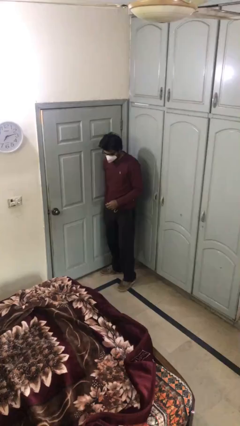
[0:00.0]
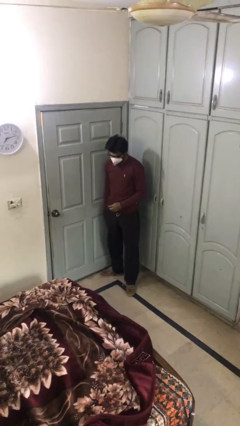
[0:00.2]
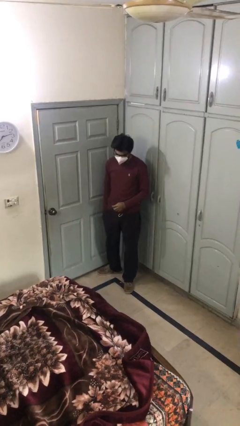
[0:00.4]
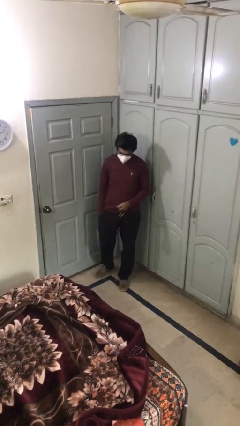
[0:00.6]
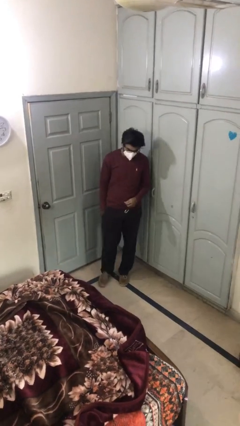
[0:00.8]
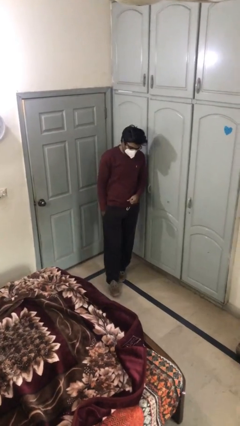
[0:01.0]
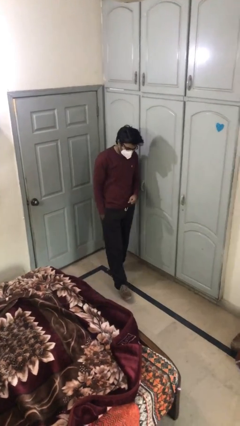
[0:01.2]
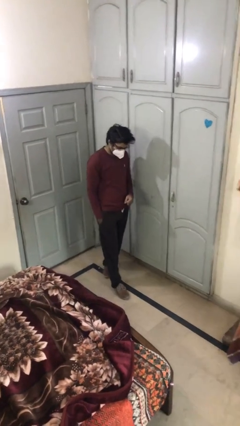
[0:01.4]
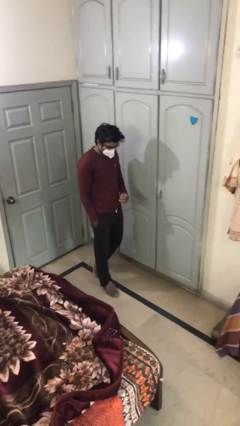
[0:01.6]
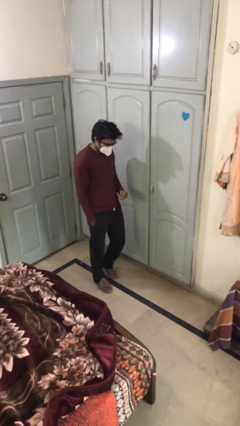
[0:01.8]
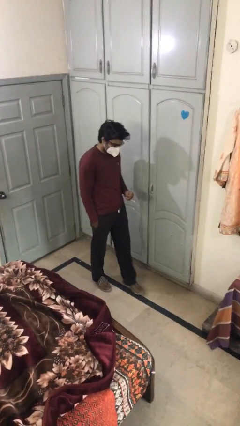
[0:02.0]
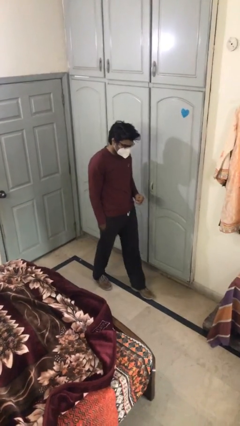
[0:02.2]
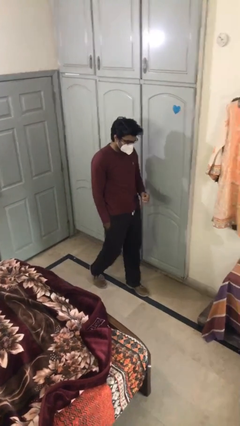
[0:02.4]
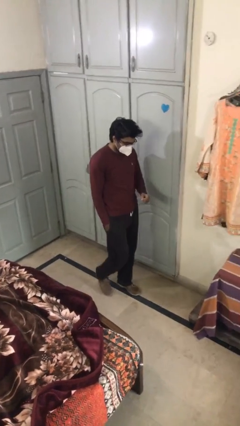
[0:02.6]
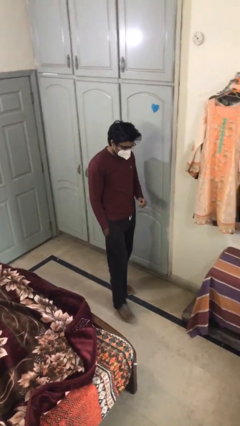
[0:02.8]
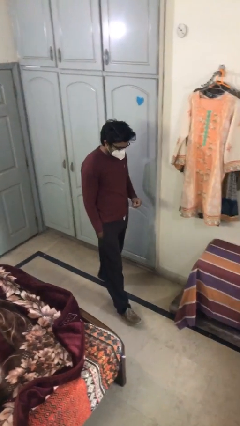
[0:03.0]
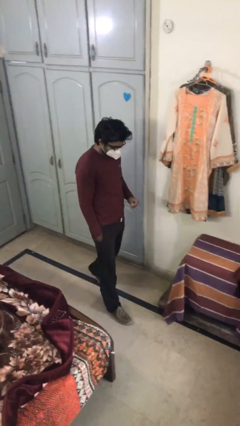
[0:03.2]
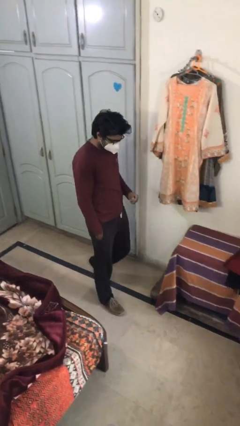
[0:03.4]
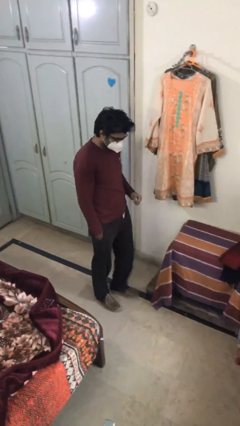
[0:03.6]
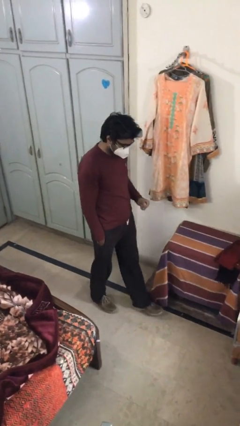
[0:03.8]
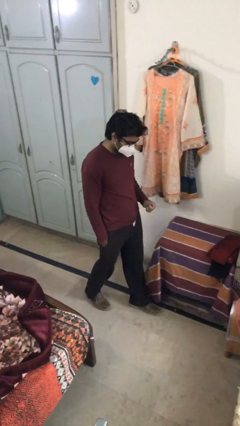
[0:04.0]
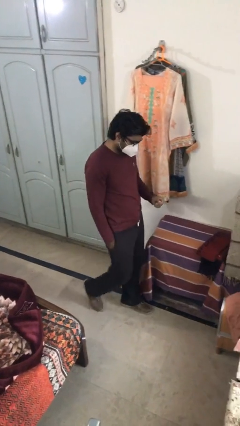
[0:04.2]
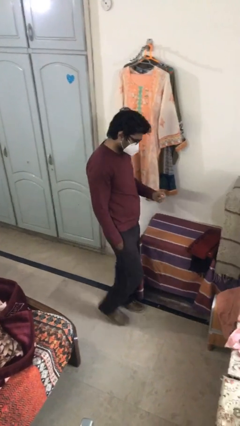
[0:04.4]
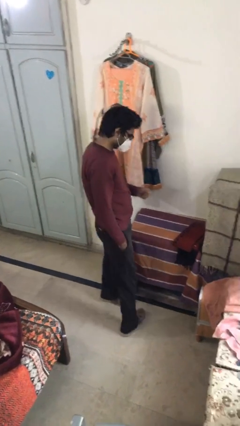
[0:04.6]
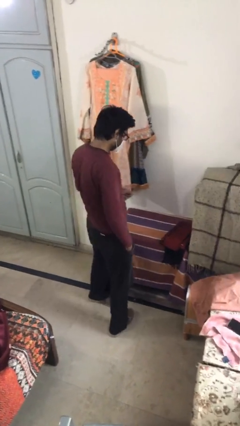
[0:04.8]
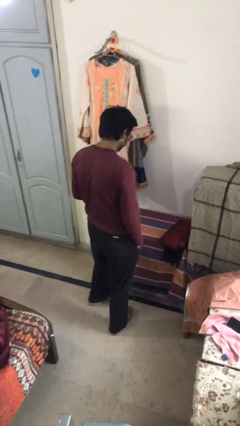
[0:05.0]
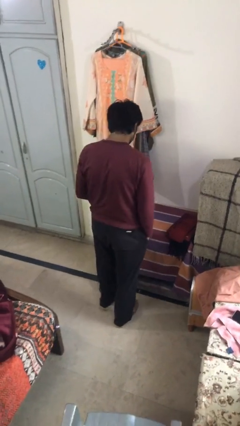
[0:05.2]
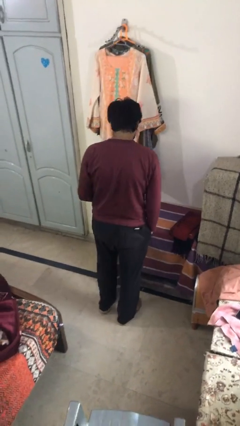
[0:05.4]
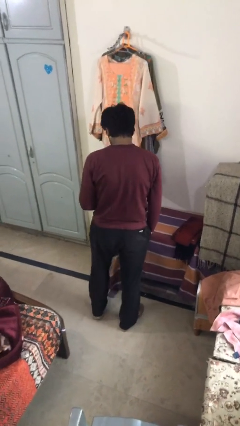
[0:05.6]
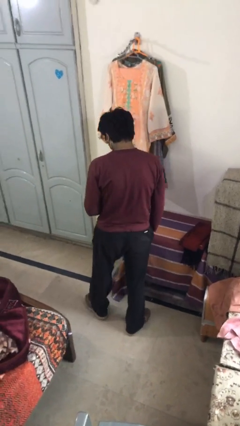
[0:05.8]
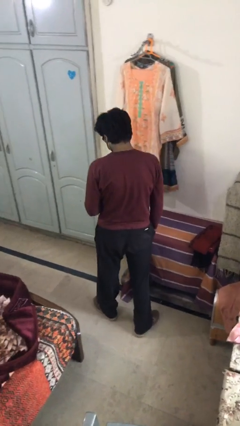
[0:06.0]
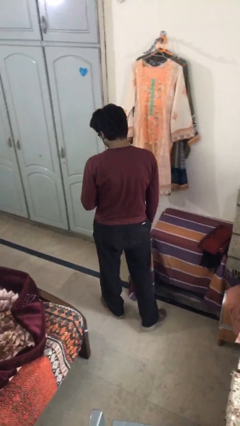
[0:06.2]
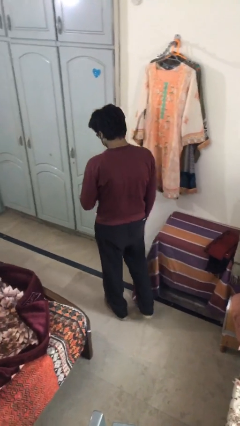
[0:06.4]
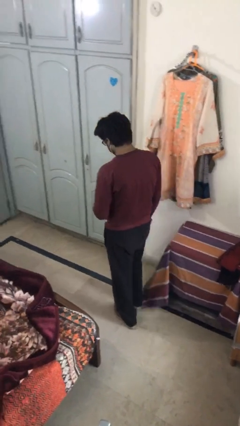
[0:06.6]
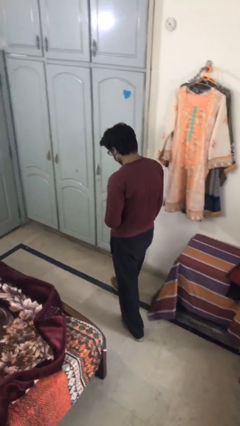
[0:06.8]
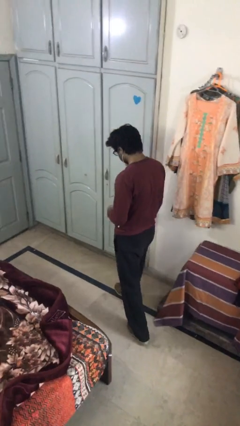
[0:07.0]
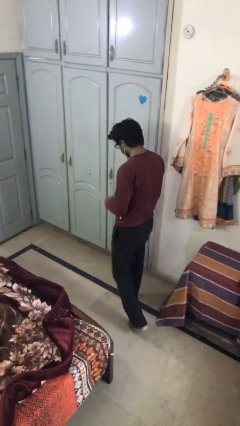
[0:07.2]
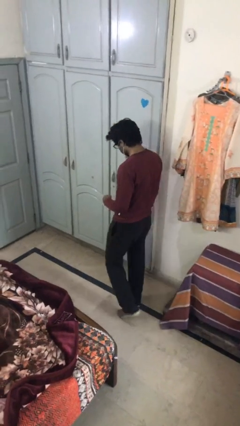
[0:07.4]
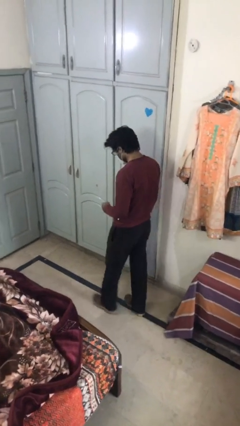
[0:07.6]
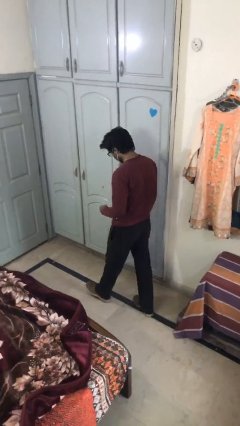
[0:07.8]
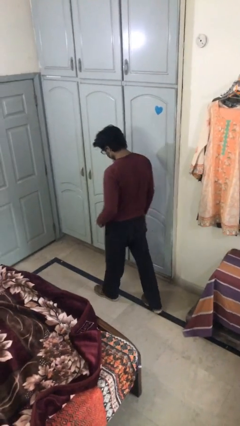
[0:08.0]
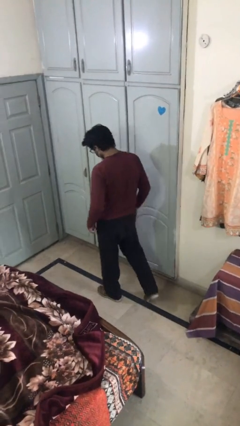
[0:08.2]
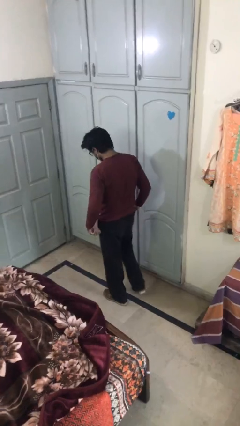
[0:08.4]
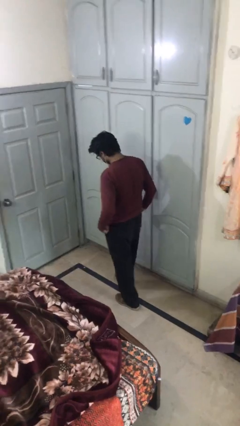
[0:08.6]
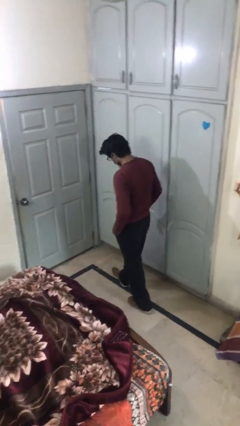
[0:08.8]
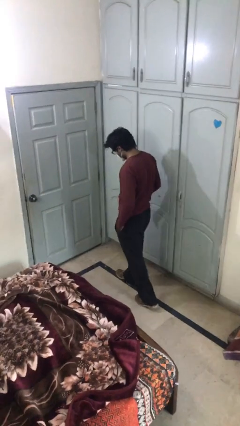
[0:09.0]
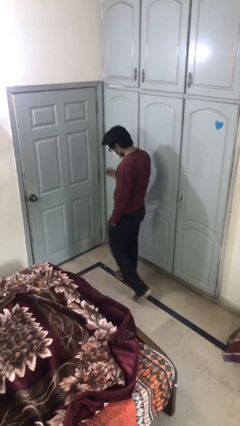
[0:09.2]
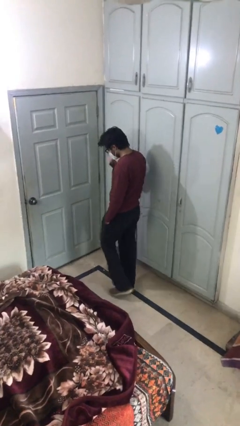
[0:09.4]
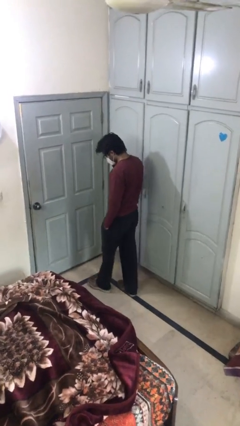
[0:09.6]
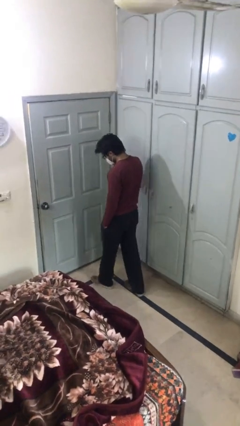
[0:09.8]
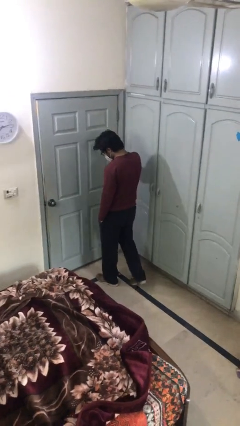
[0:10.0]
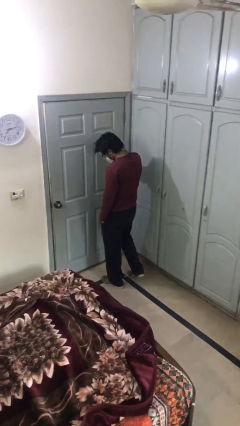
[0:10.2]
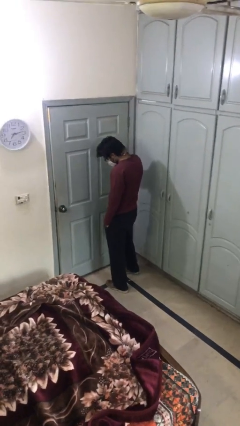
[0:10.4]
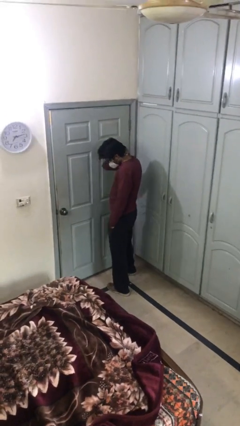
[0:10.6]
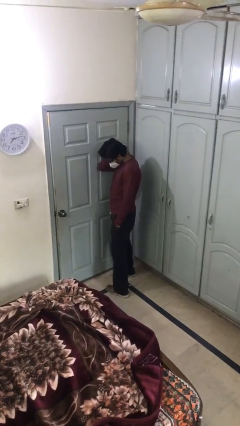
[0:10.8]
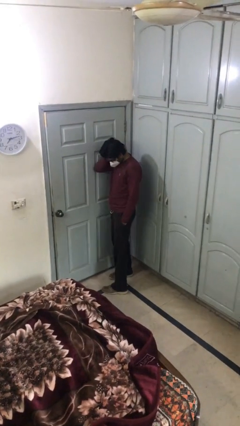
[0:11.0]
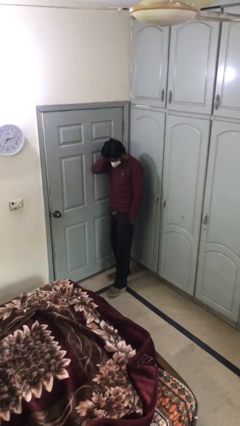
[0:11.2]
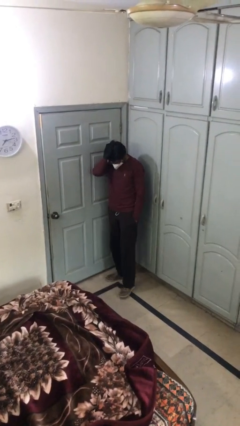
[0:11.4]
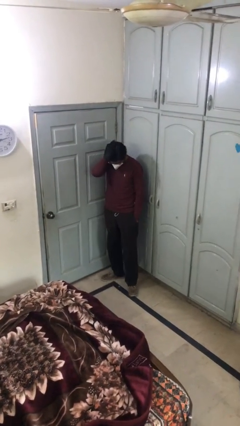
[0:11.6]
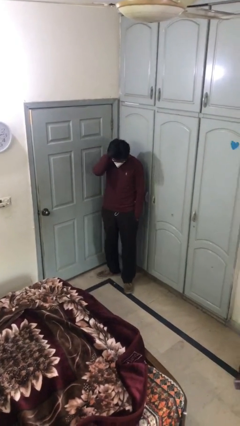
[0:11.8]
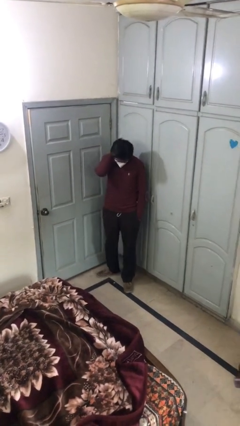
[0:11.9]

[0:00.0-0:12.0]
person walks

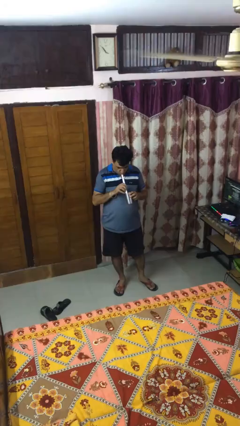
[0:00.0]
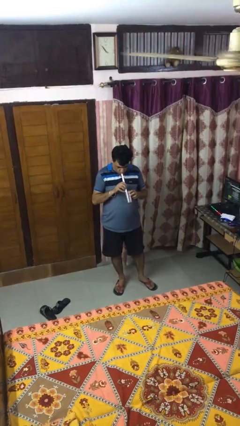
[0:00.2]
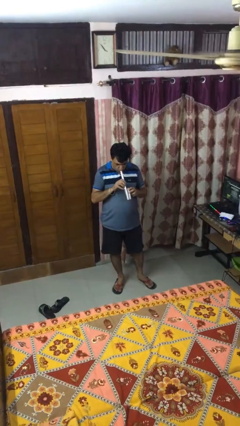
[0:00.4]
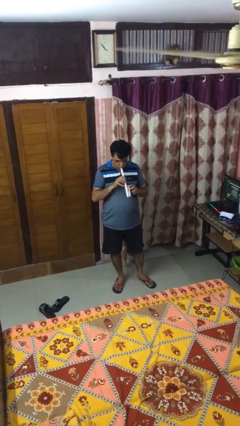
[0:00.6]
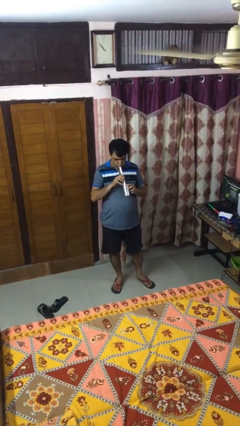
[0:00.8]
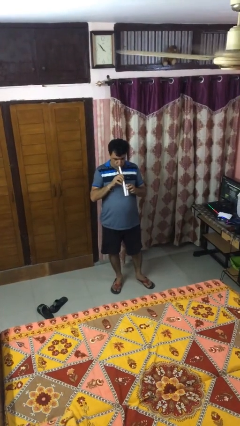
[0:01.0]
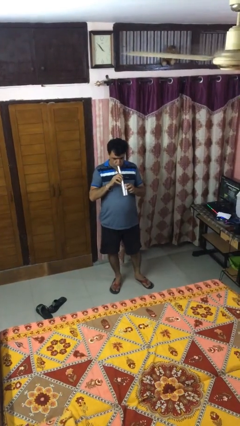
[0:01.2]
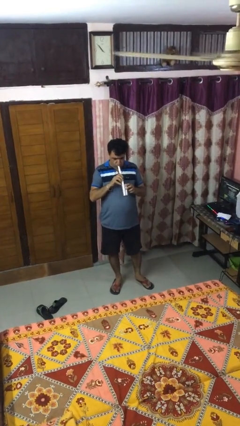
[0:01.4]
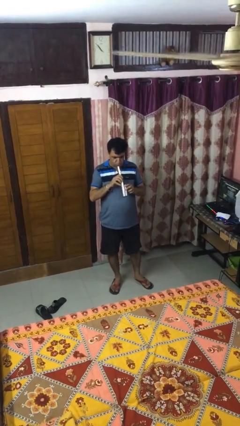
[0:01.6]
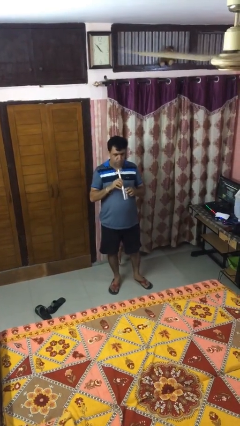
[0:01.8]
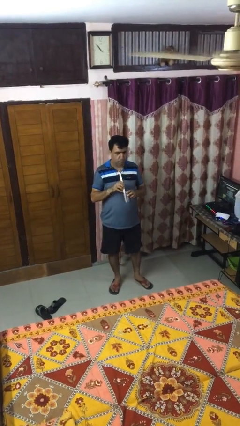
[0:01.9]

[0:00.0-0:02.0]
person drinks from straw

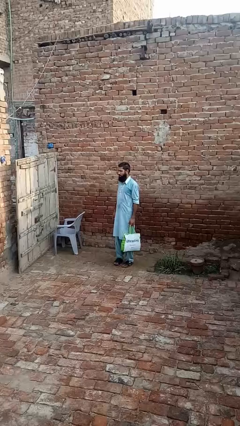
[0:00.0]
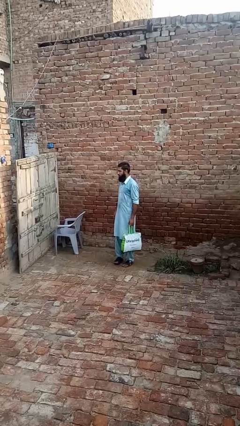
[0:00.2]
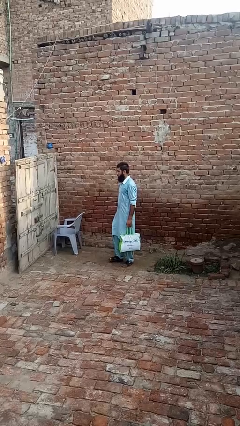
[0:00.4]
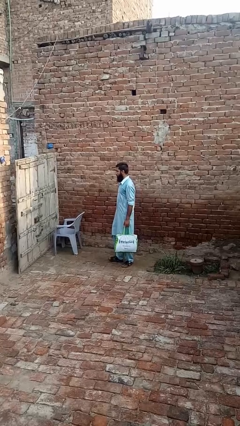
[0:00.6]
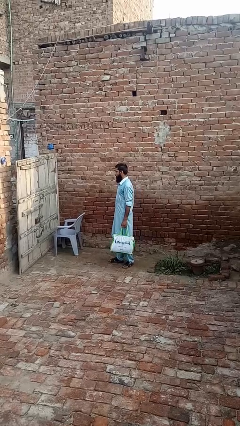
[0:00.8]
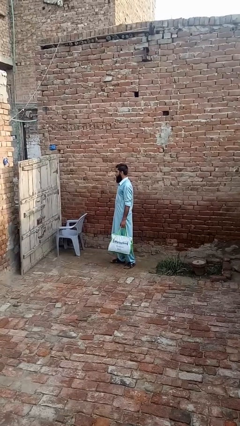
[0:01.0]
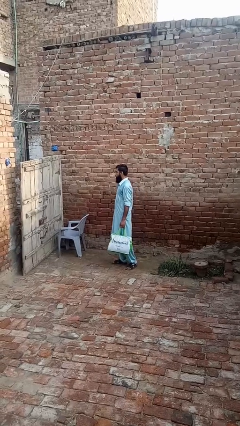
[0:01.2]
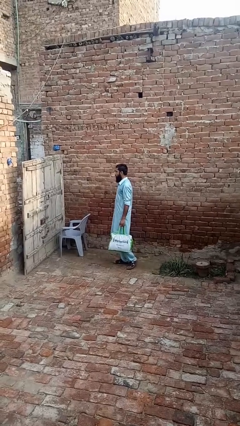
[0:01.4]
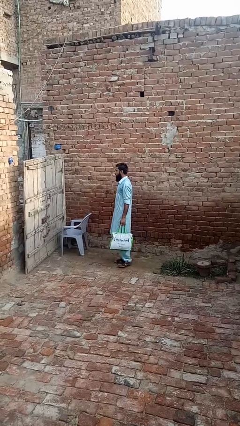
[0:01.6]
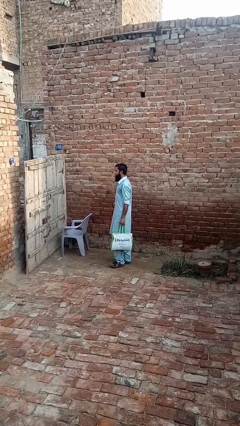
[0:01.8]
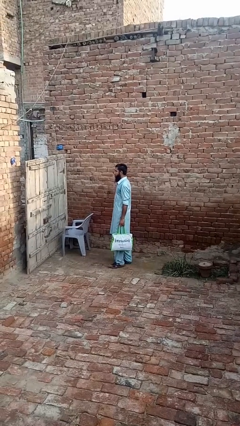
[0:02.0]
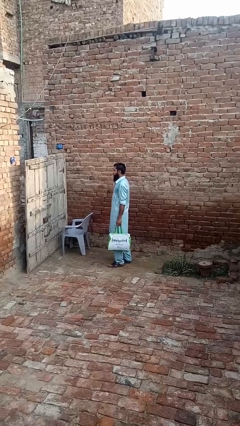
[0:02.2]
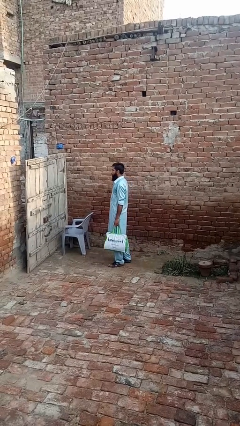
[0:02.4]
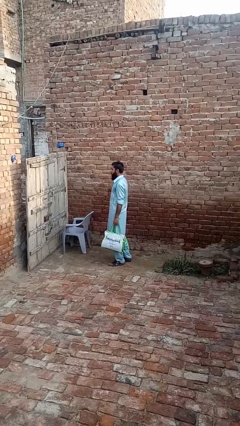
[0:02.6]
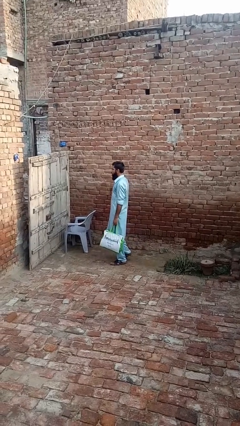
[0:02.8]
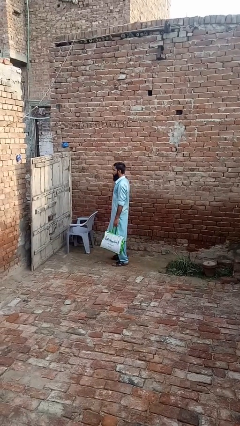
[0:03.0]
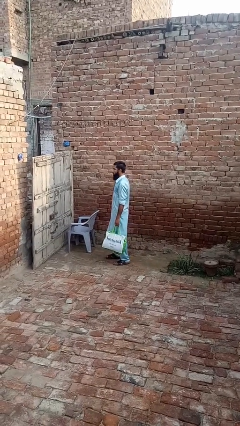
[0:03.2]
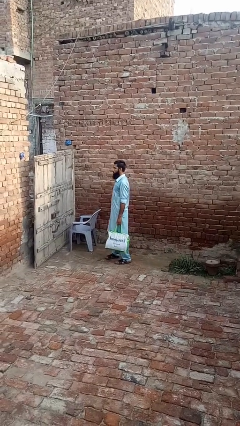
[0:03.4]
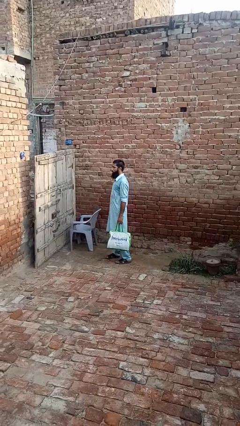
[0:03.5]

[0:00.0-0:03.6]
person carries groceries

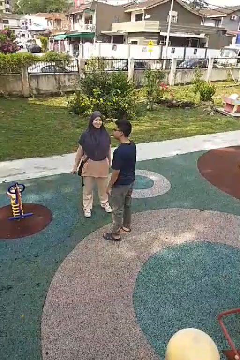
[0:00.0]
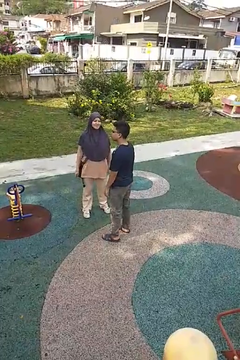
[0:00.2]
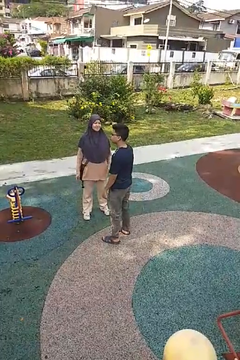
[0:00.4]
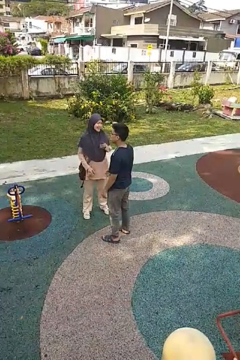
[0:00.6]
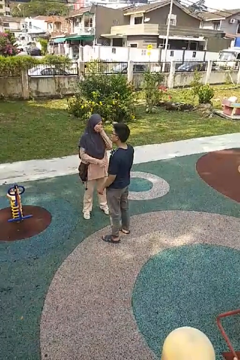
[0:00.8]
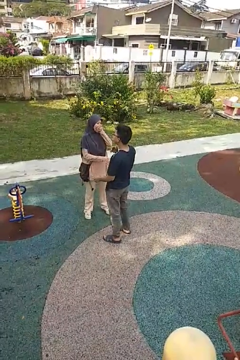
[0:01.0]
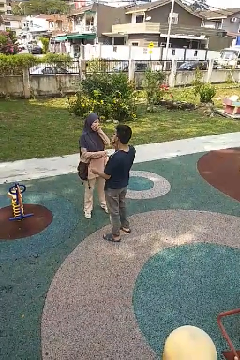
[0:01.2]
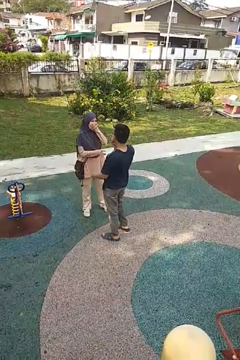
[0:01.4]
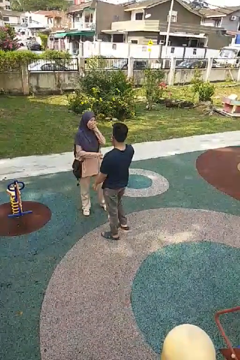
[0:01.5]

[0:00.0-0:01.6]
person laughs with person
